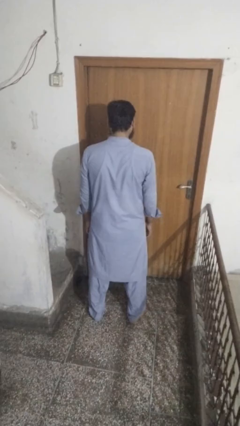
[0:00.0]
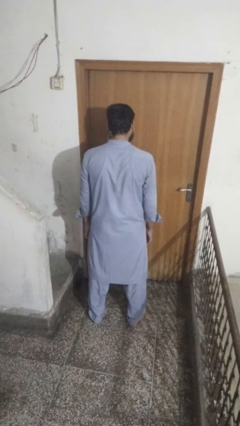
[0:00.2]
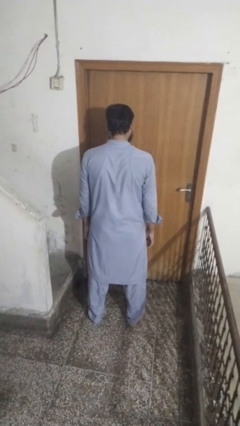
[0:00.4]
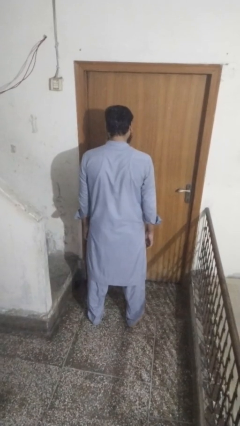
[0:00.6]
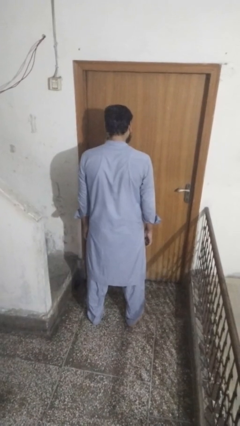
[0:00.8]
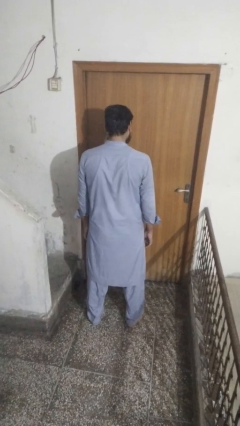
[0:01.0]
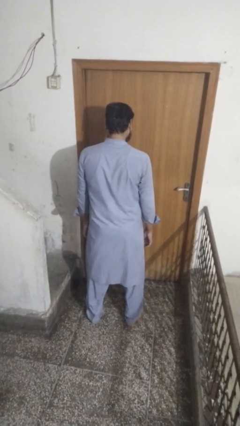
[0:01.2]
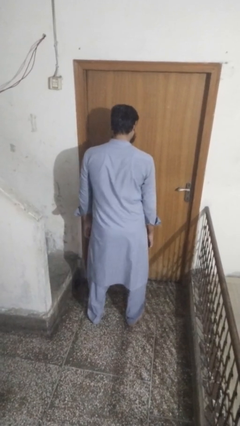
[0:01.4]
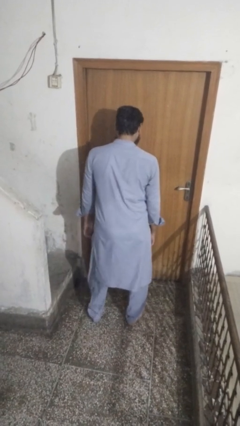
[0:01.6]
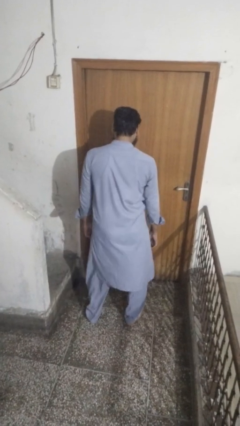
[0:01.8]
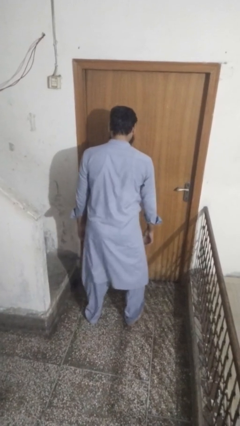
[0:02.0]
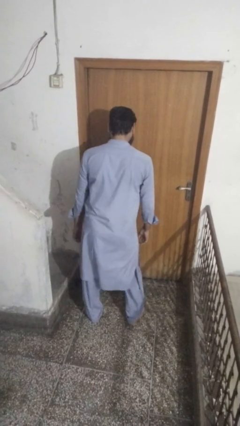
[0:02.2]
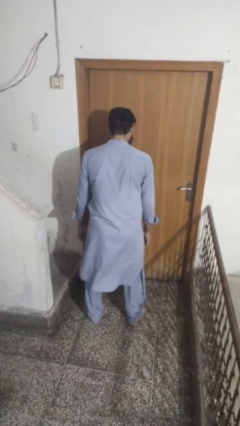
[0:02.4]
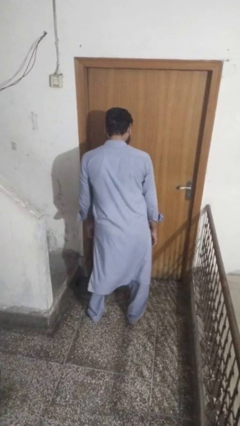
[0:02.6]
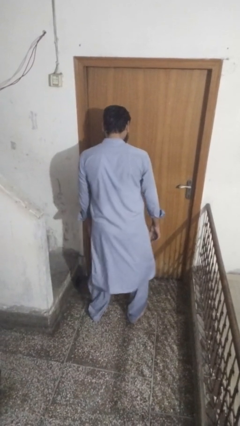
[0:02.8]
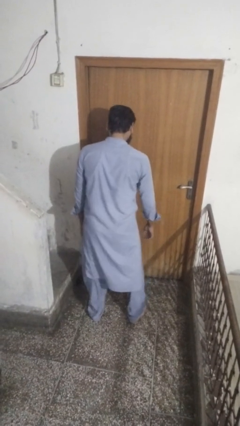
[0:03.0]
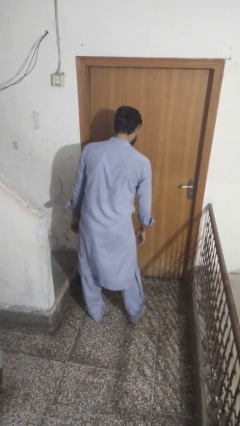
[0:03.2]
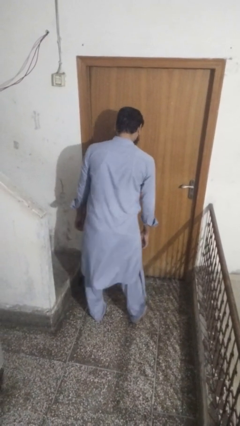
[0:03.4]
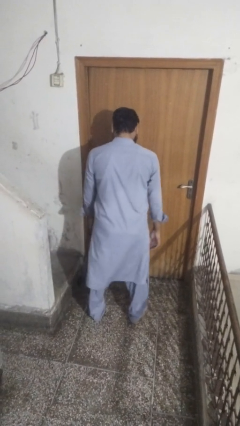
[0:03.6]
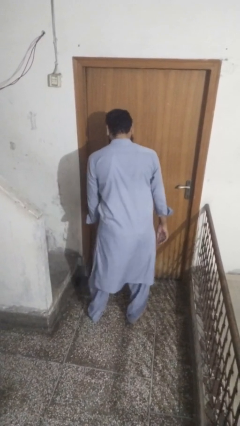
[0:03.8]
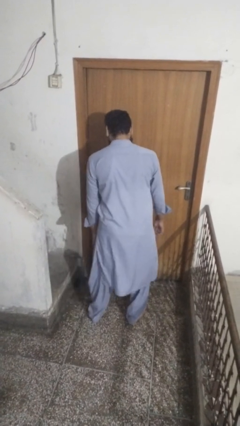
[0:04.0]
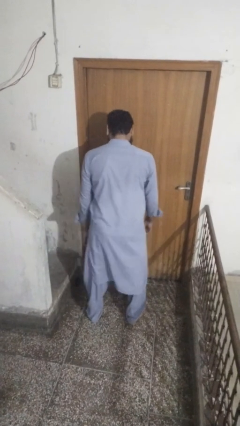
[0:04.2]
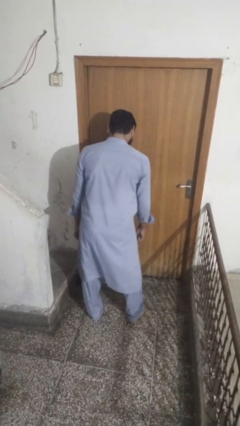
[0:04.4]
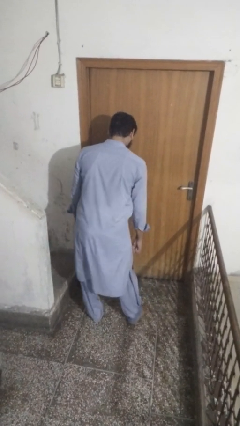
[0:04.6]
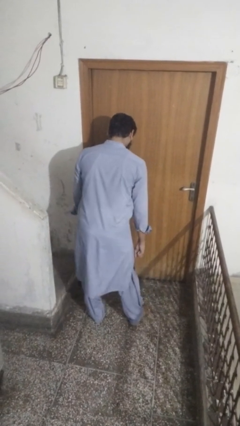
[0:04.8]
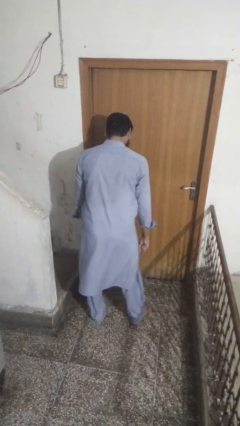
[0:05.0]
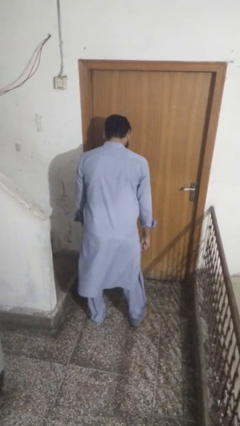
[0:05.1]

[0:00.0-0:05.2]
person wiggles hips

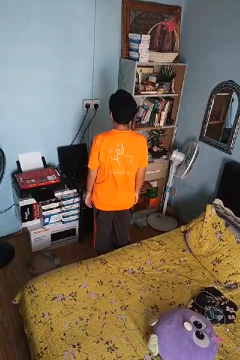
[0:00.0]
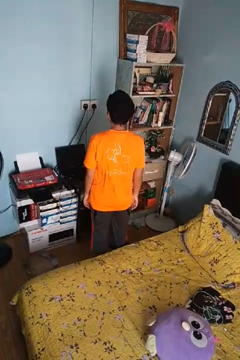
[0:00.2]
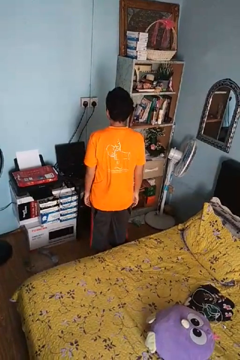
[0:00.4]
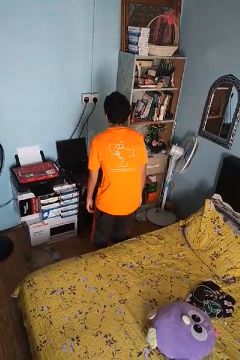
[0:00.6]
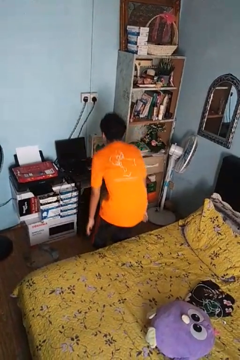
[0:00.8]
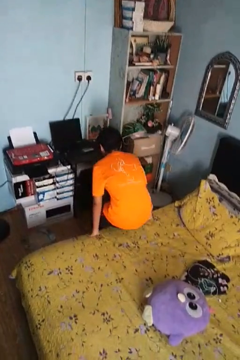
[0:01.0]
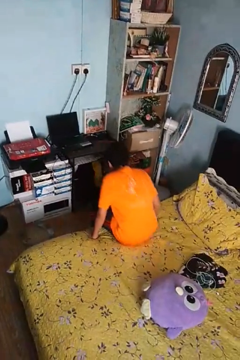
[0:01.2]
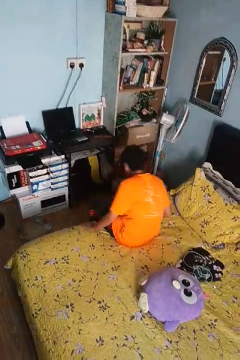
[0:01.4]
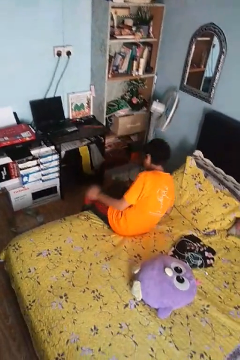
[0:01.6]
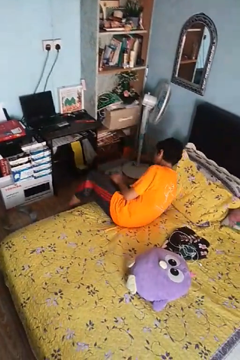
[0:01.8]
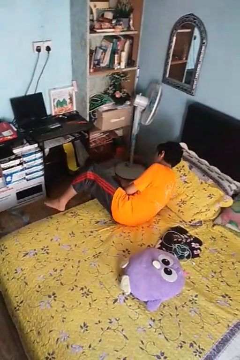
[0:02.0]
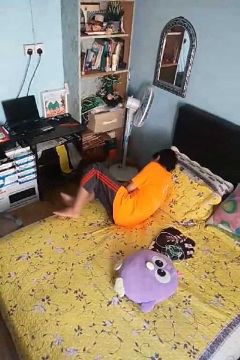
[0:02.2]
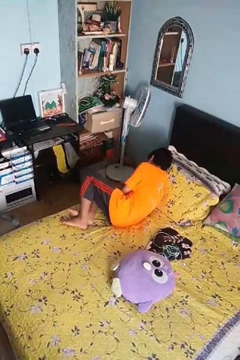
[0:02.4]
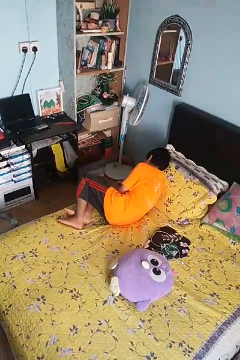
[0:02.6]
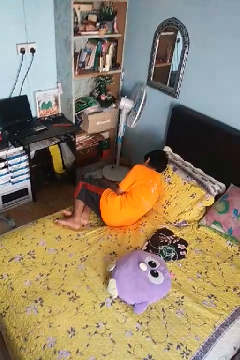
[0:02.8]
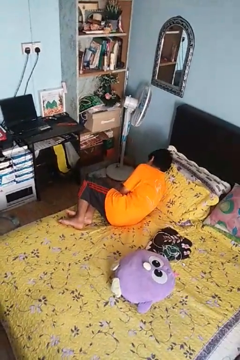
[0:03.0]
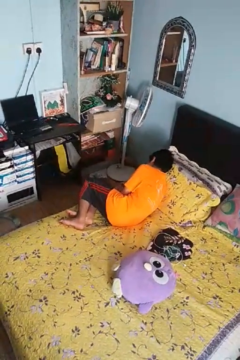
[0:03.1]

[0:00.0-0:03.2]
person lies down on bed

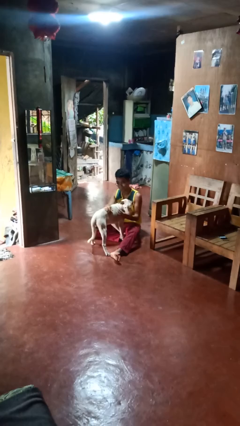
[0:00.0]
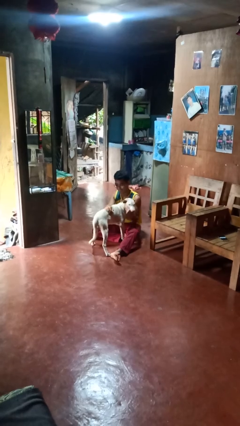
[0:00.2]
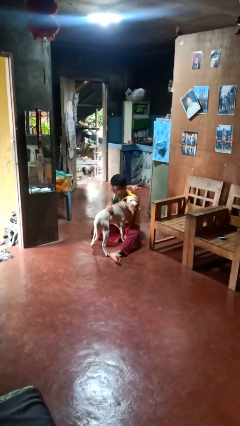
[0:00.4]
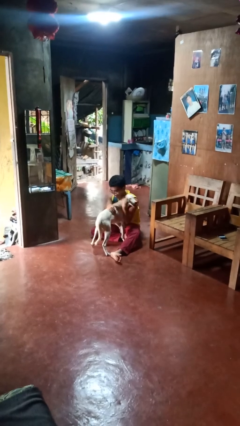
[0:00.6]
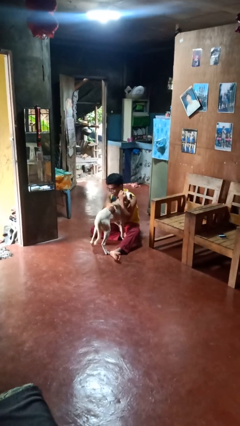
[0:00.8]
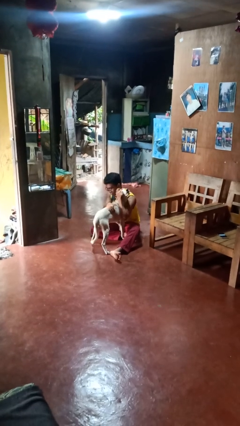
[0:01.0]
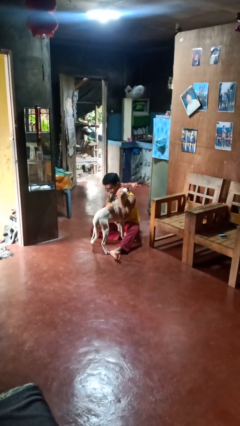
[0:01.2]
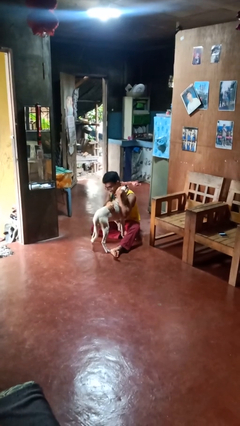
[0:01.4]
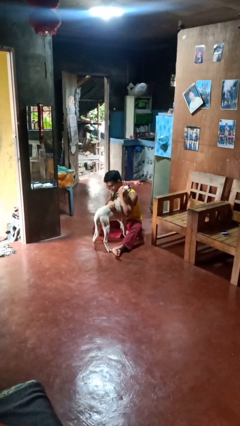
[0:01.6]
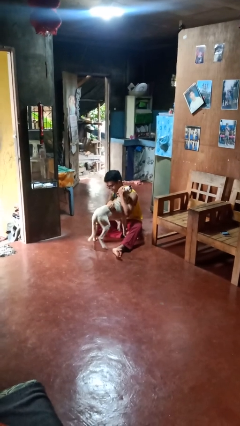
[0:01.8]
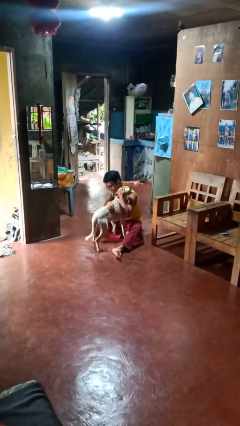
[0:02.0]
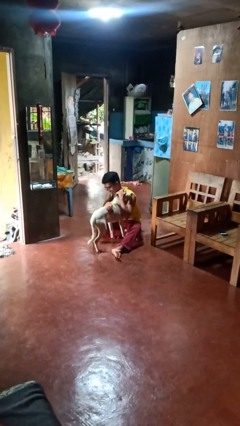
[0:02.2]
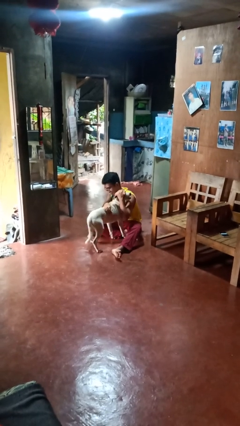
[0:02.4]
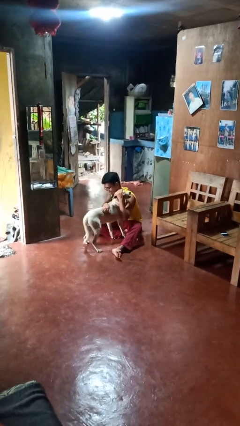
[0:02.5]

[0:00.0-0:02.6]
person hugs dog

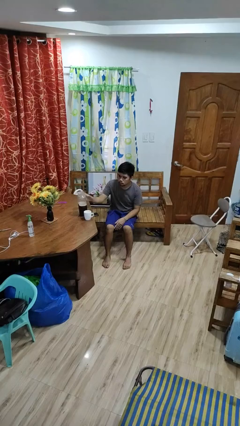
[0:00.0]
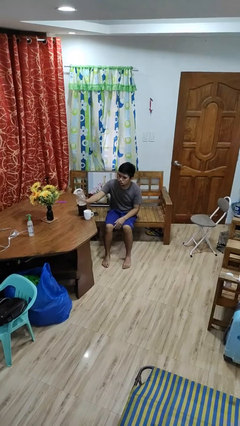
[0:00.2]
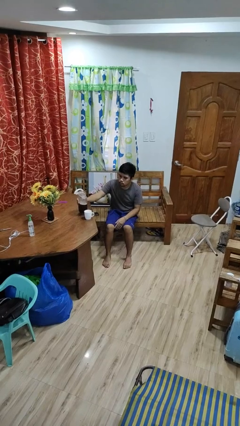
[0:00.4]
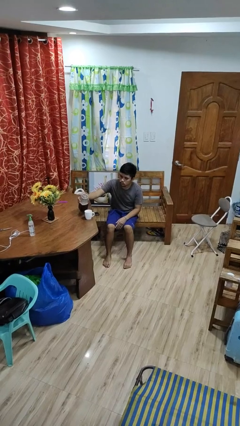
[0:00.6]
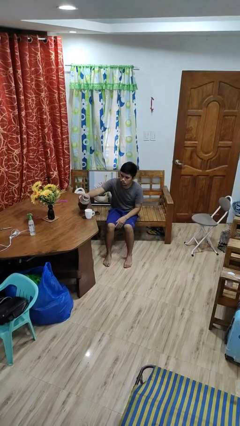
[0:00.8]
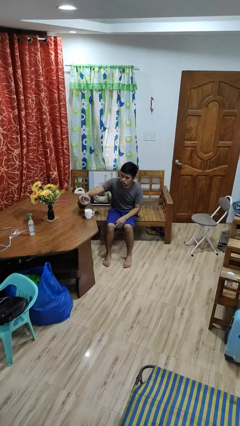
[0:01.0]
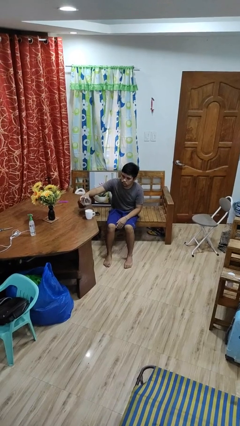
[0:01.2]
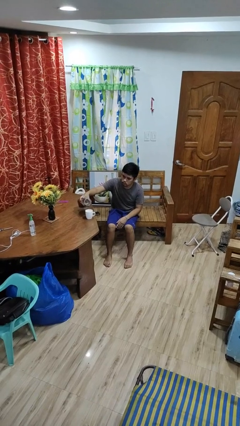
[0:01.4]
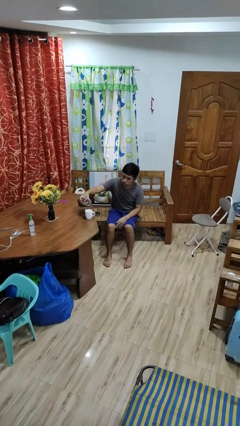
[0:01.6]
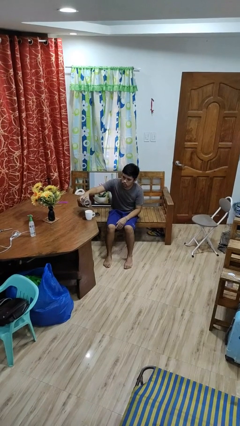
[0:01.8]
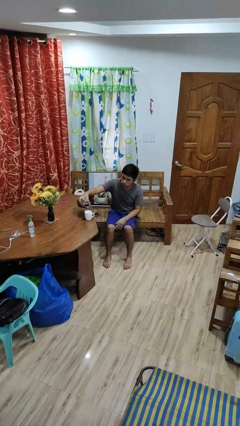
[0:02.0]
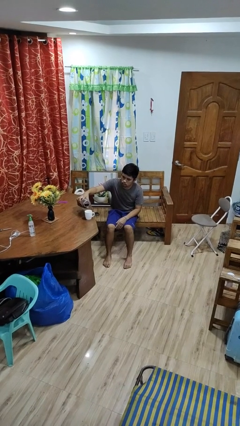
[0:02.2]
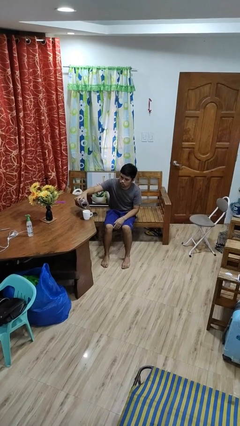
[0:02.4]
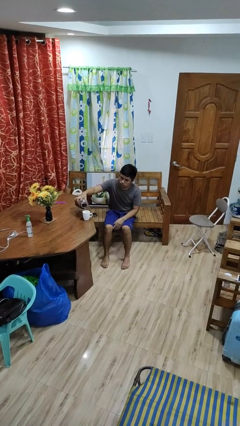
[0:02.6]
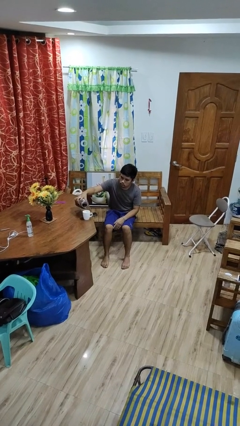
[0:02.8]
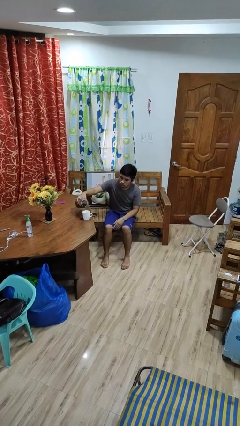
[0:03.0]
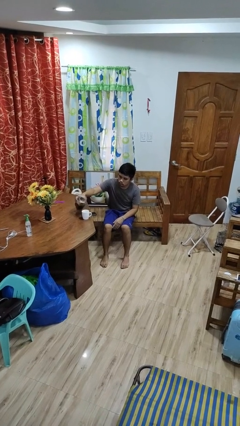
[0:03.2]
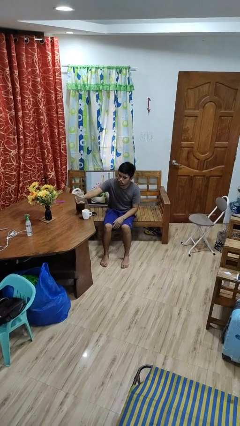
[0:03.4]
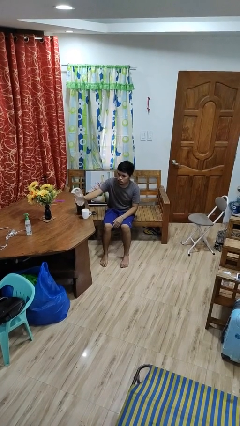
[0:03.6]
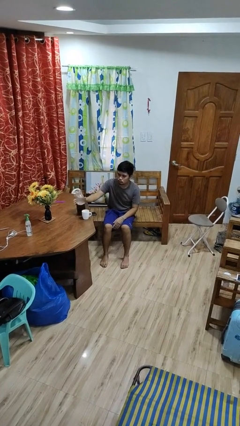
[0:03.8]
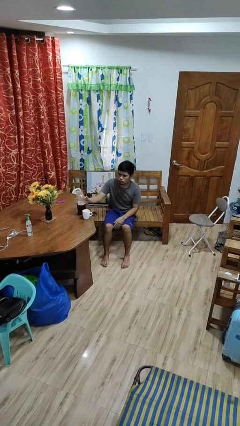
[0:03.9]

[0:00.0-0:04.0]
person pours coffee into mug

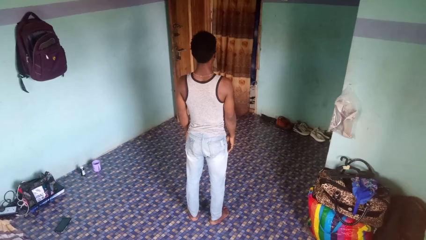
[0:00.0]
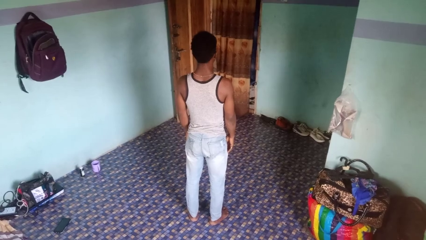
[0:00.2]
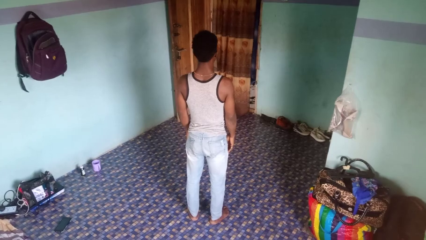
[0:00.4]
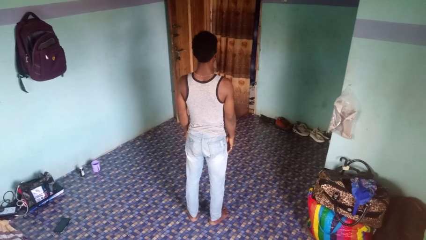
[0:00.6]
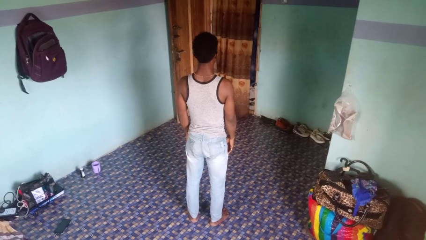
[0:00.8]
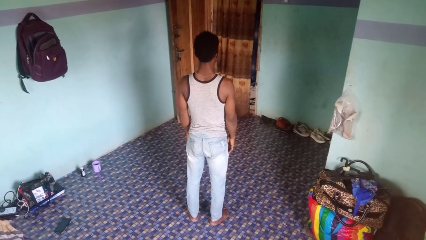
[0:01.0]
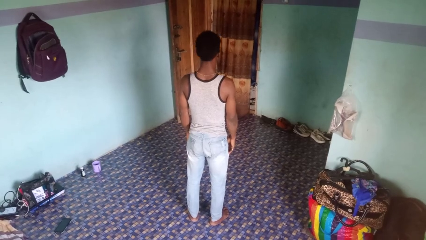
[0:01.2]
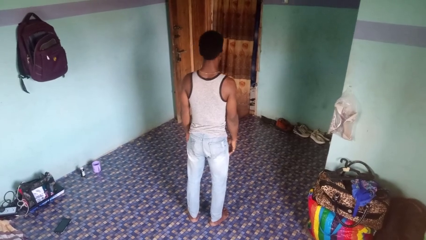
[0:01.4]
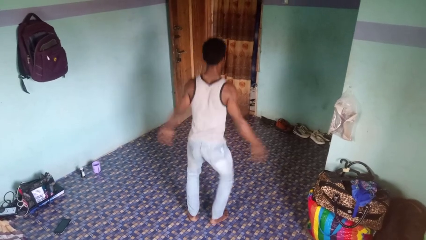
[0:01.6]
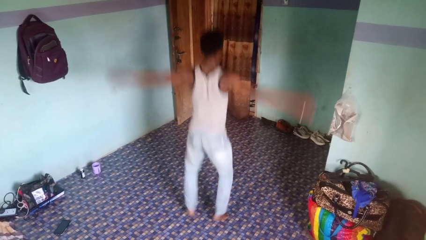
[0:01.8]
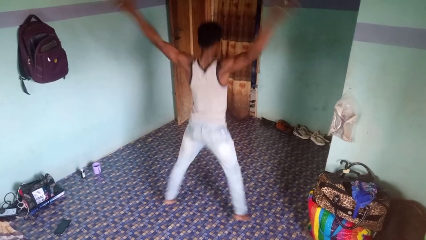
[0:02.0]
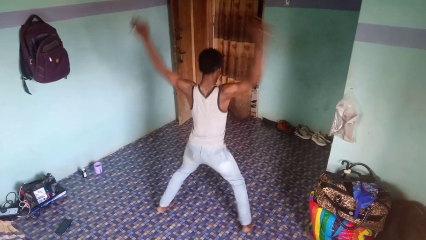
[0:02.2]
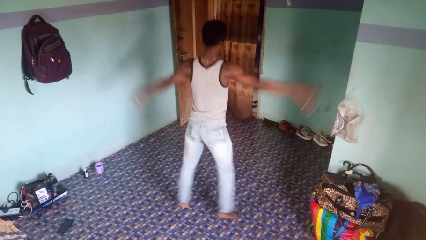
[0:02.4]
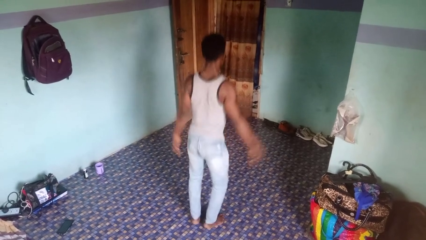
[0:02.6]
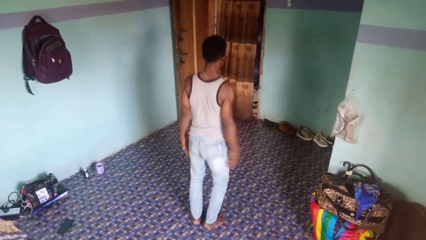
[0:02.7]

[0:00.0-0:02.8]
person exercises with jumping jacks

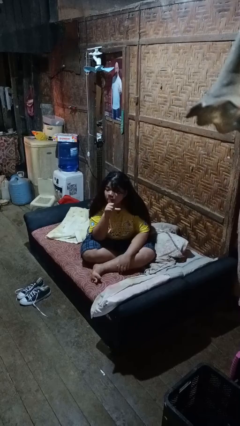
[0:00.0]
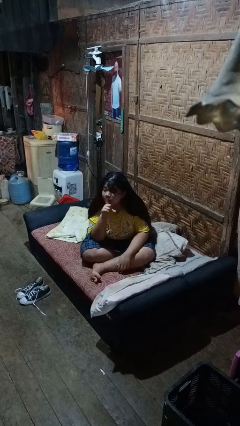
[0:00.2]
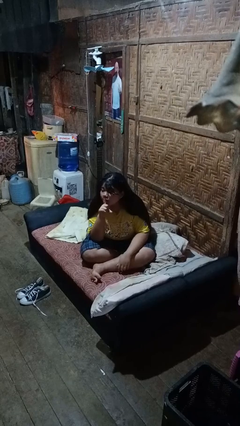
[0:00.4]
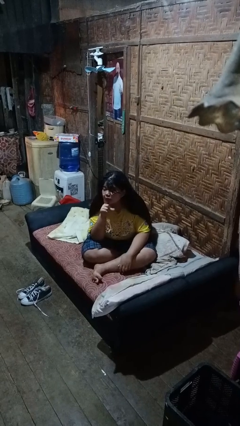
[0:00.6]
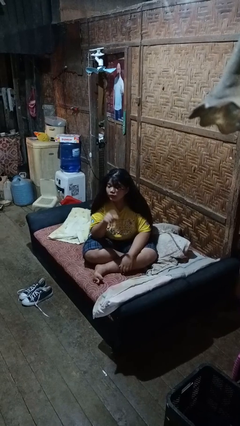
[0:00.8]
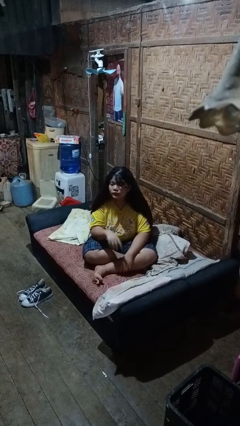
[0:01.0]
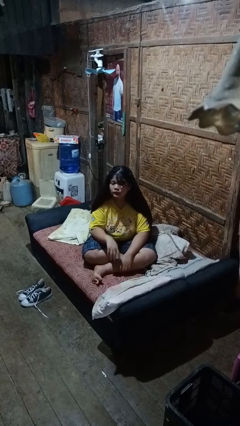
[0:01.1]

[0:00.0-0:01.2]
person gestures be quiet
